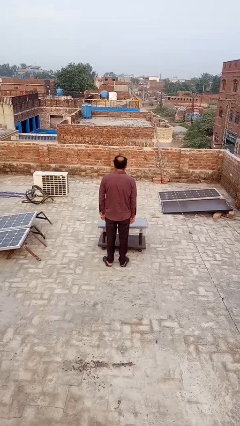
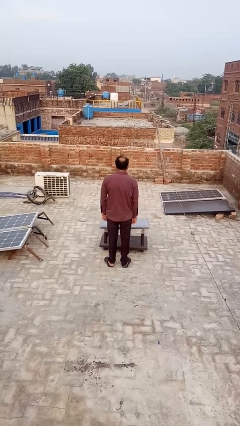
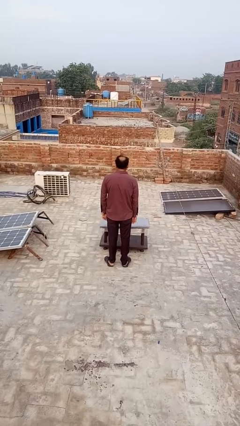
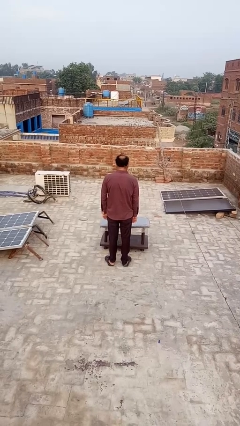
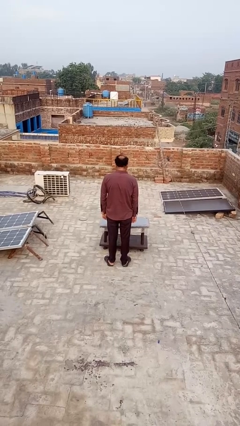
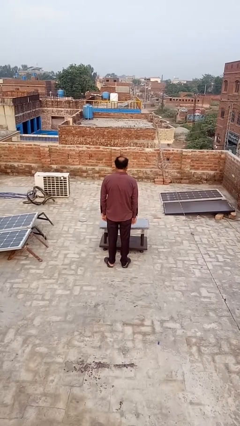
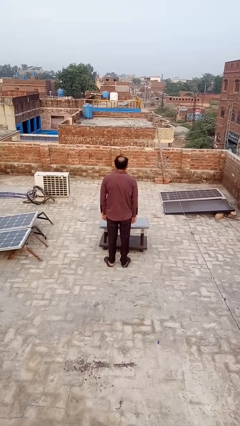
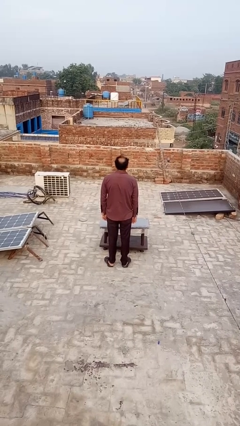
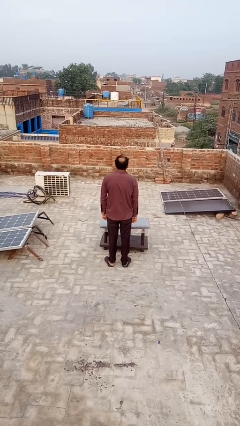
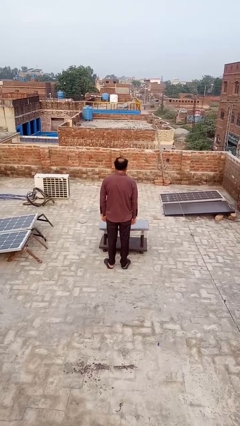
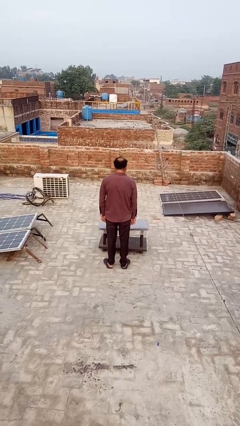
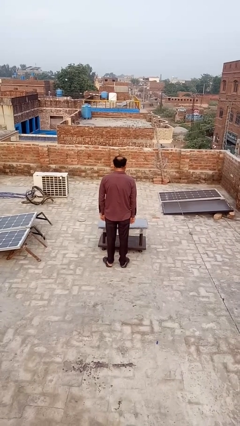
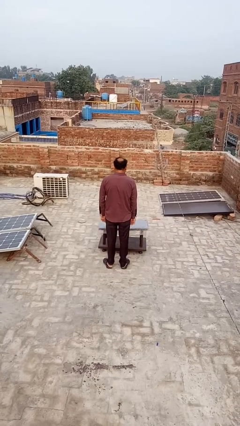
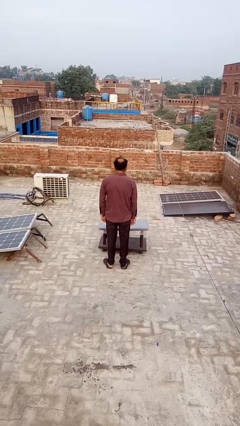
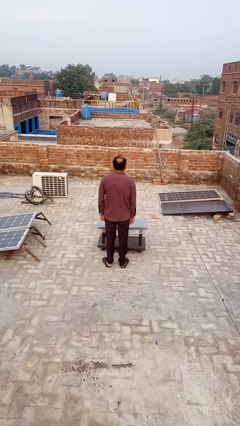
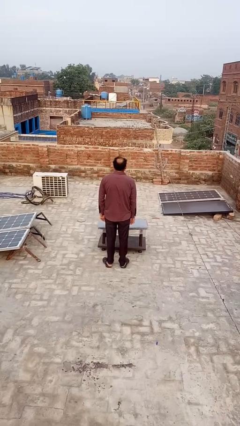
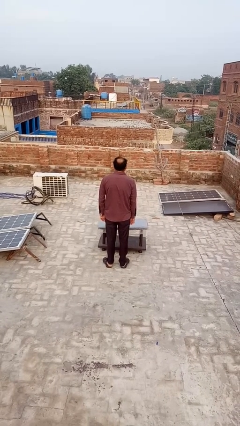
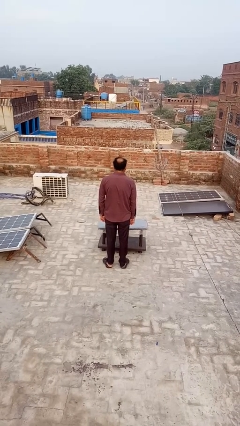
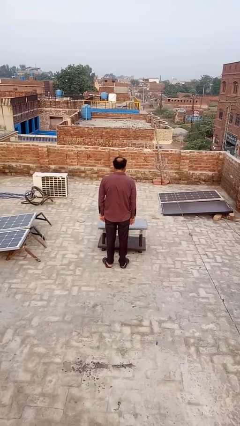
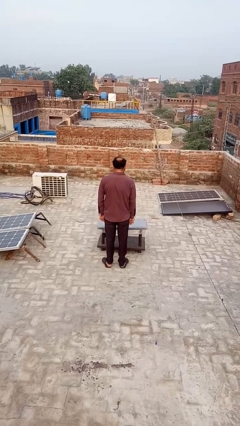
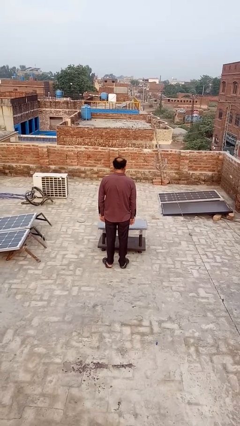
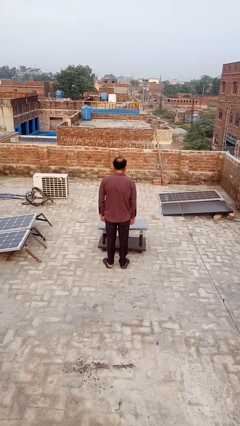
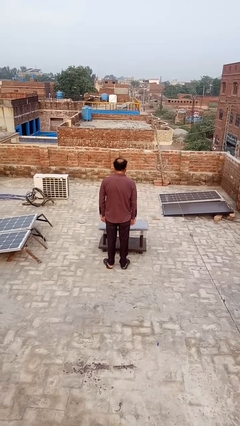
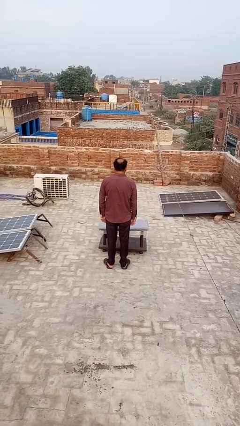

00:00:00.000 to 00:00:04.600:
person nods head

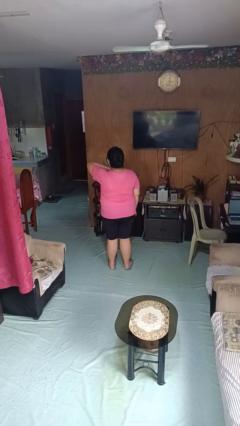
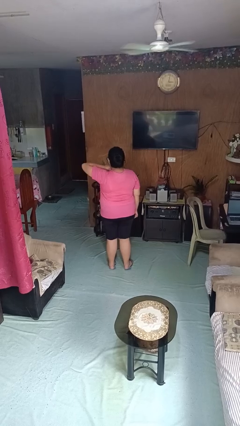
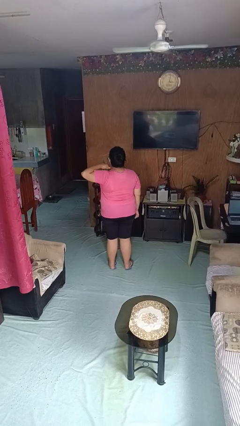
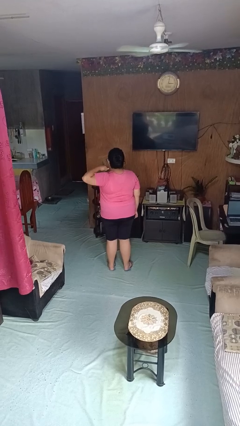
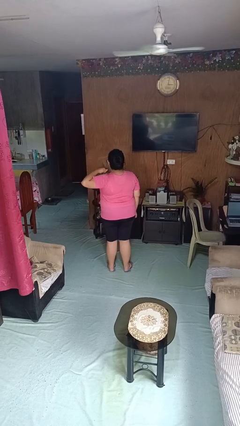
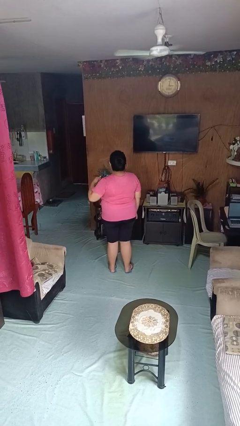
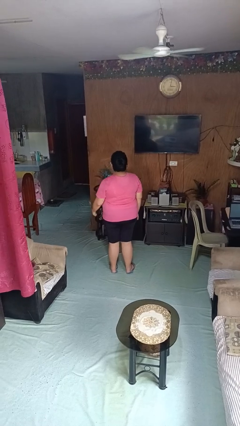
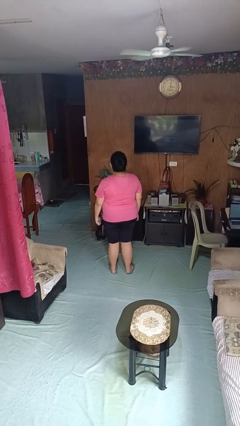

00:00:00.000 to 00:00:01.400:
person gestures cut

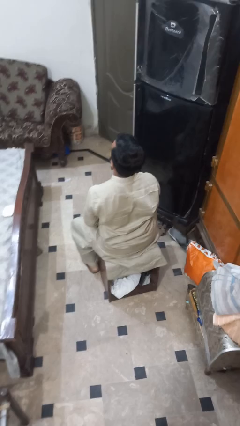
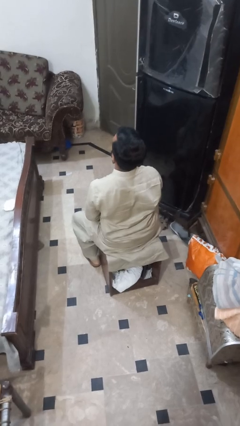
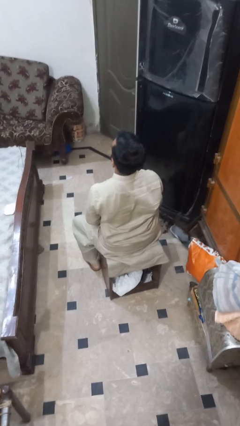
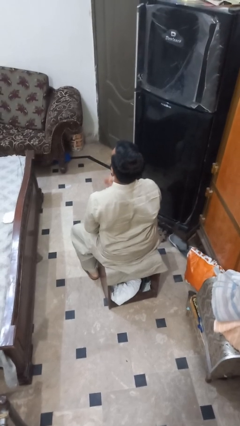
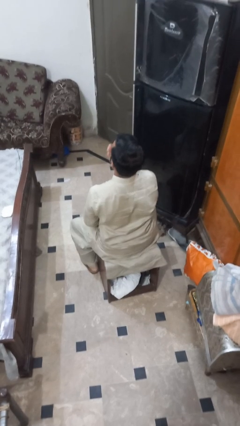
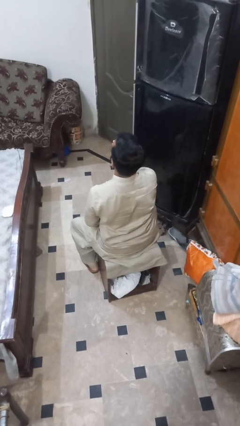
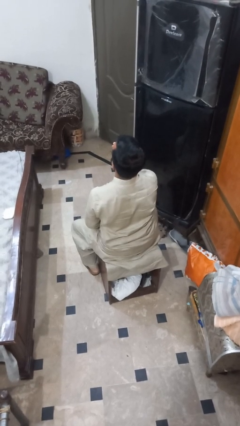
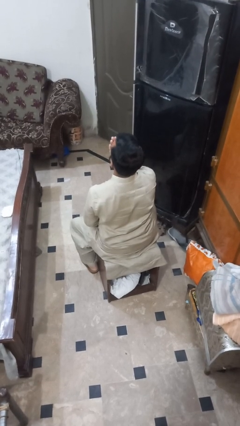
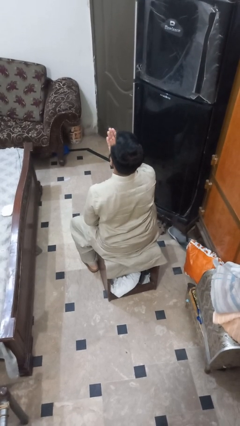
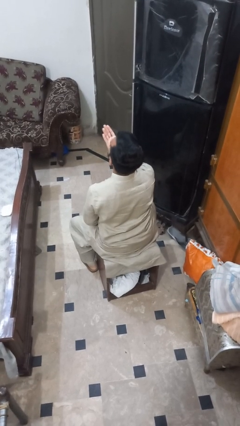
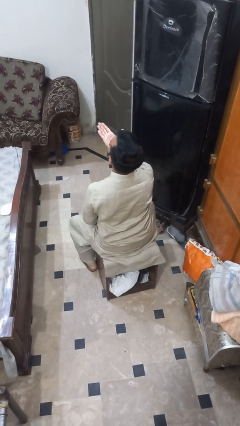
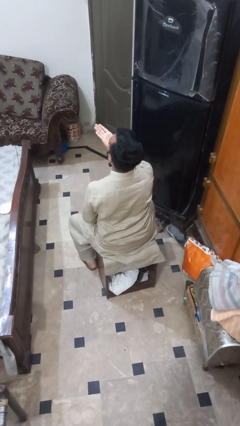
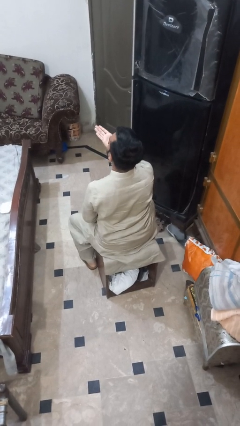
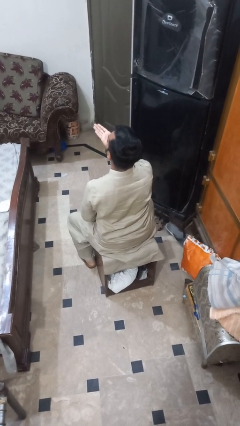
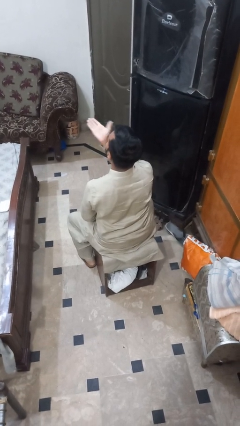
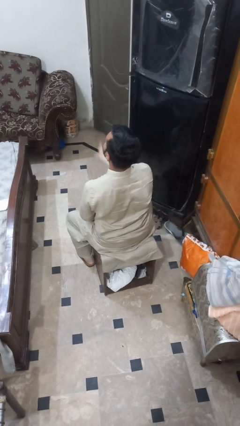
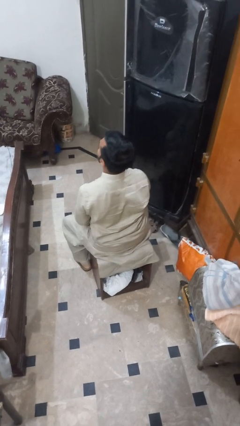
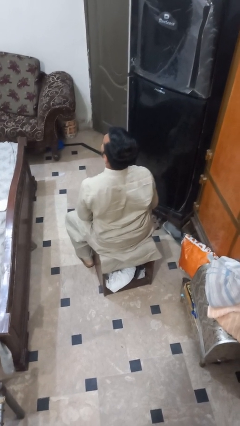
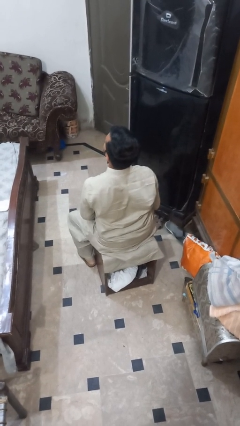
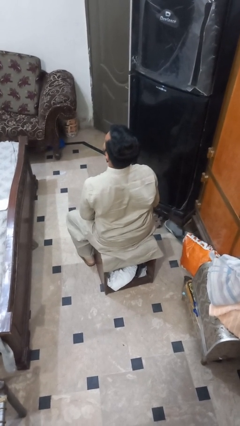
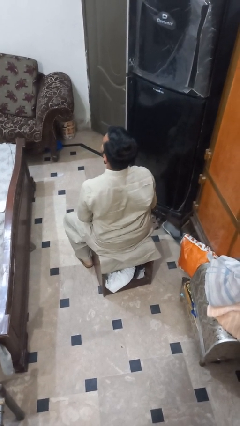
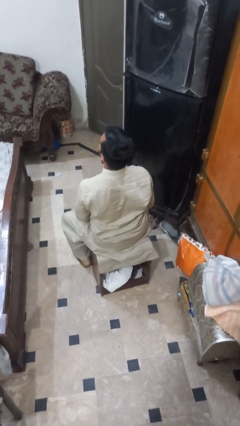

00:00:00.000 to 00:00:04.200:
person gestures blow kiss

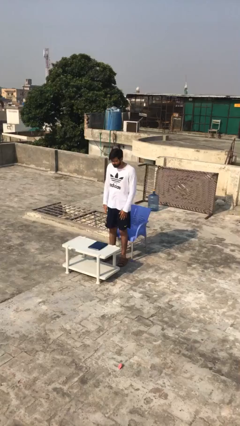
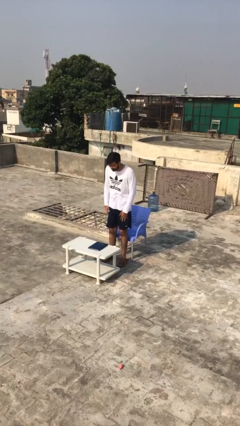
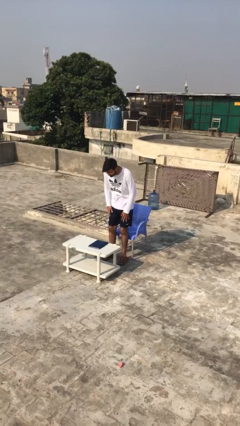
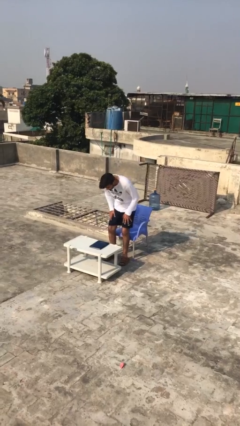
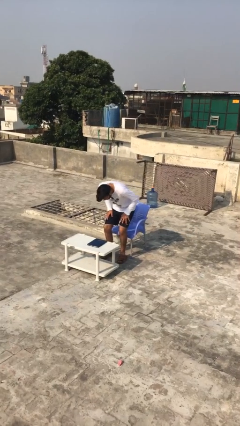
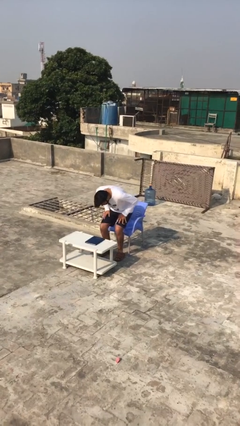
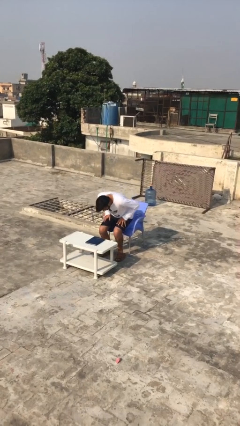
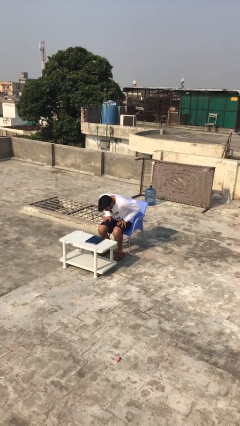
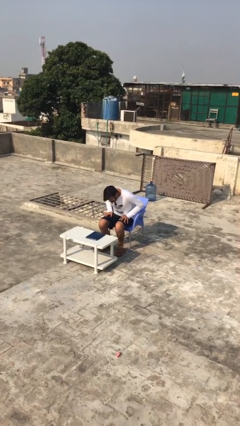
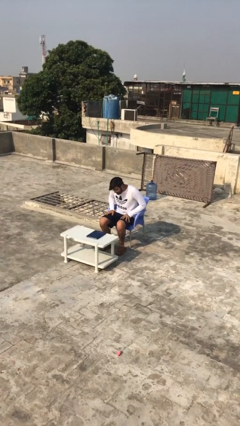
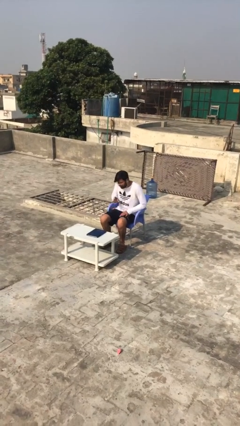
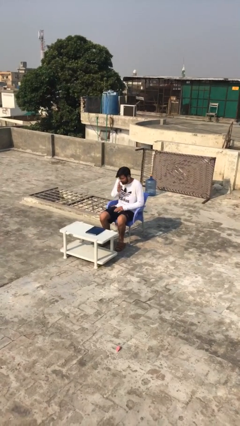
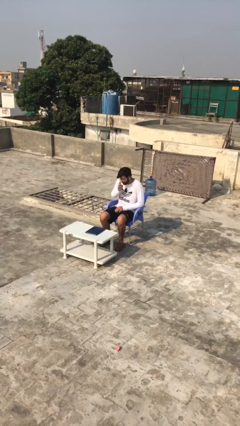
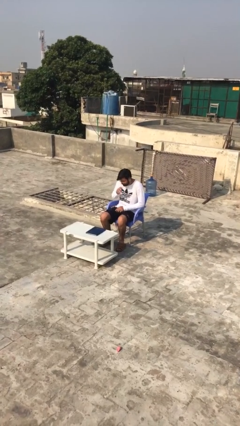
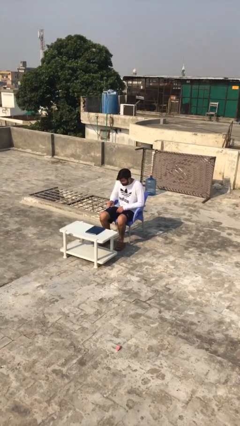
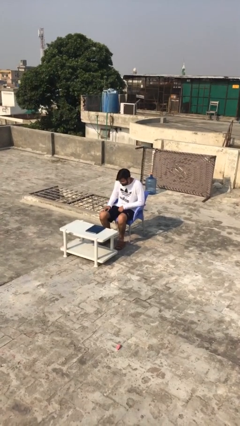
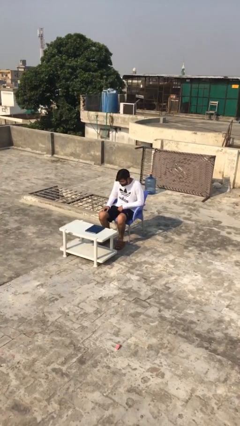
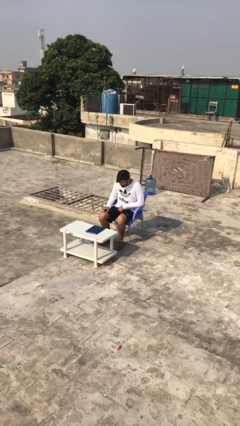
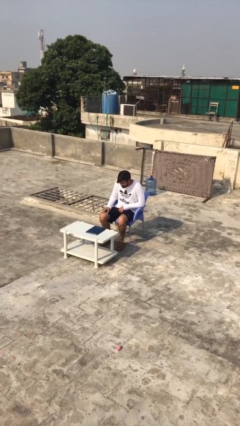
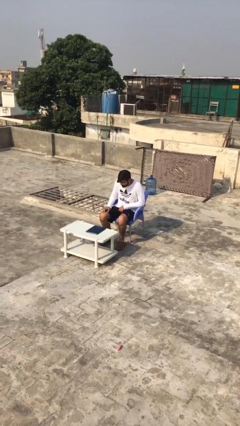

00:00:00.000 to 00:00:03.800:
person sits down

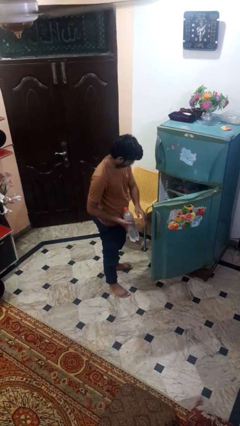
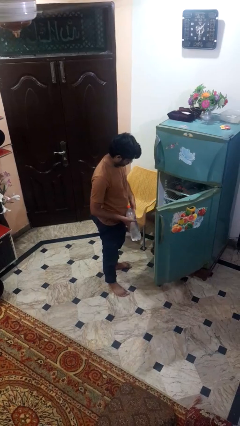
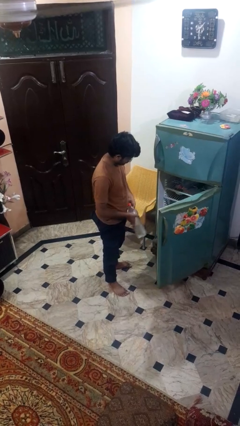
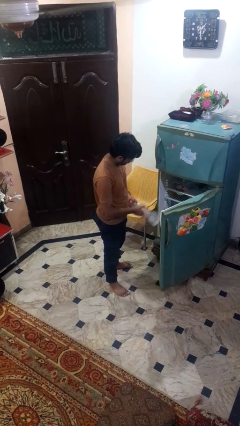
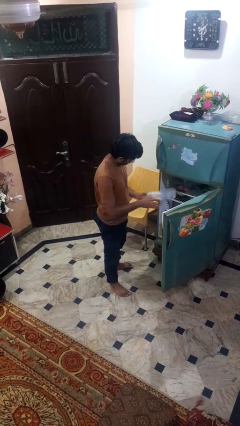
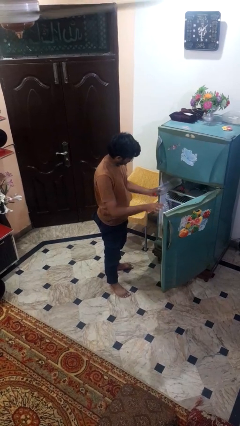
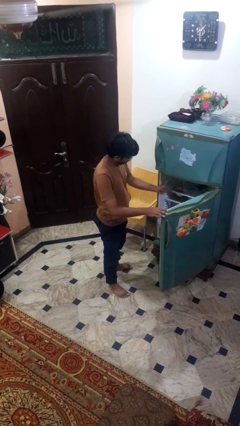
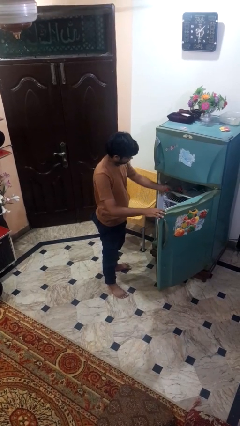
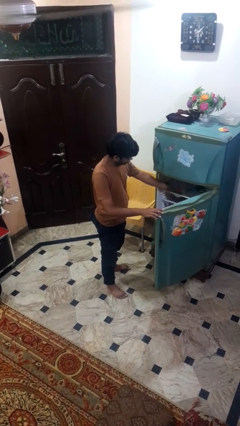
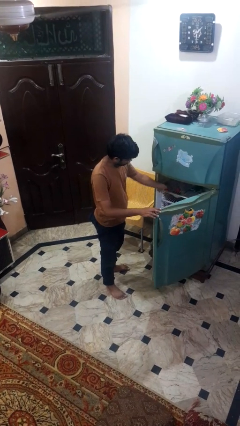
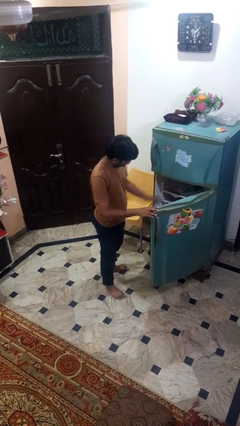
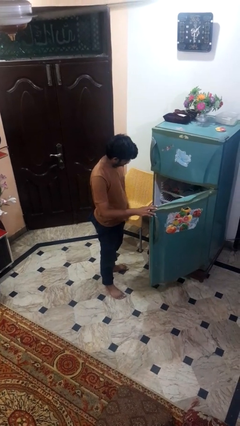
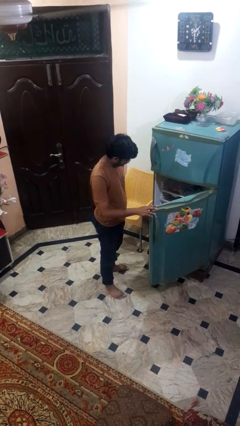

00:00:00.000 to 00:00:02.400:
person puts object into refrigerator

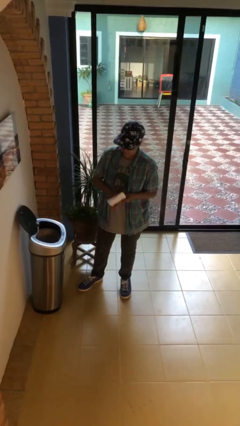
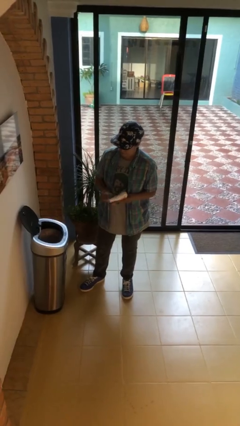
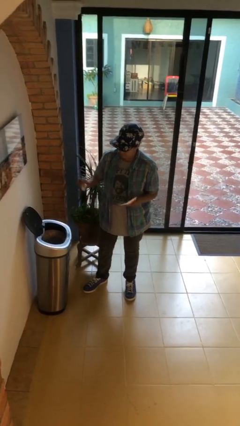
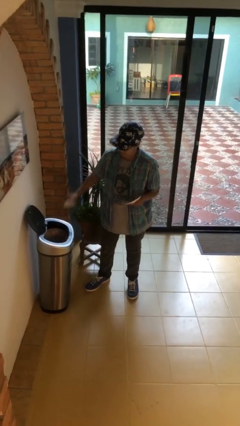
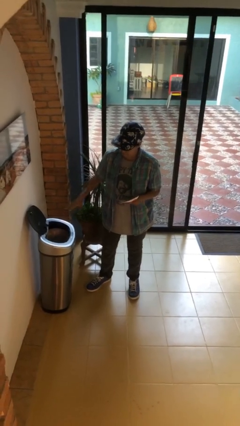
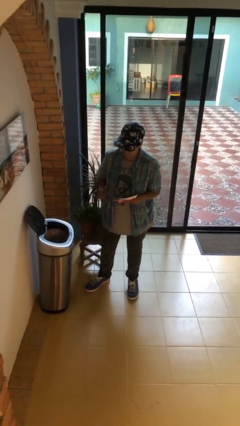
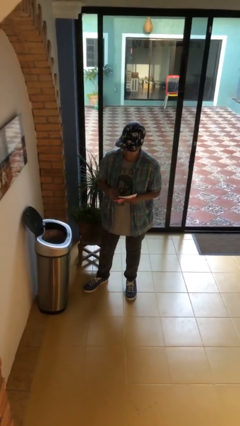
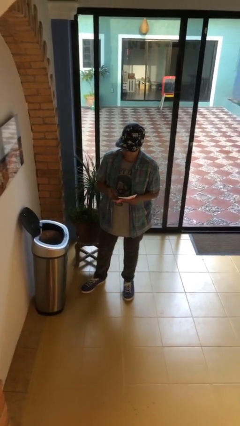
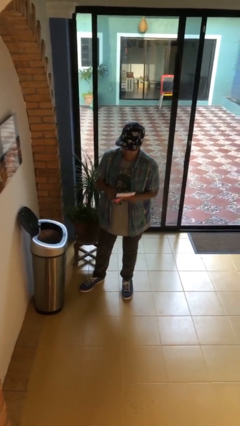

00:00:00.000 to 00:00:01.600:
person discards trash
